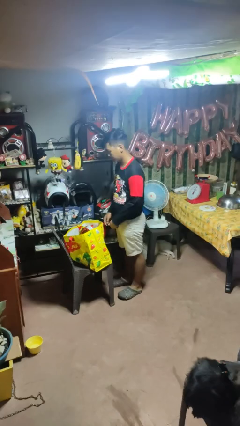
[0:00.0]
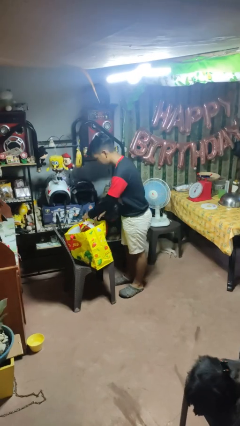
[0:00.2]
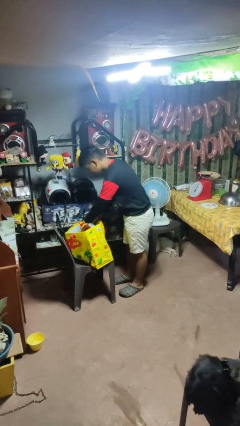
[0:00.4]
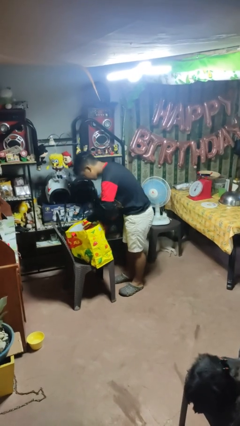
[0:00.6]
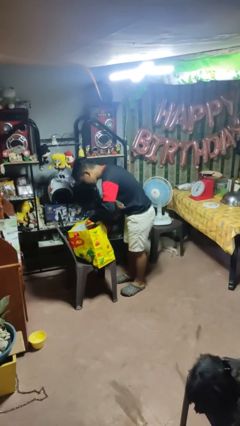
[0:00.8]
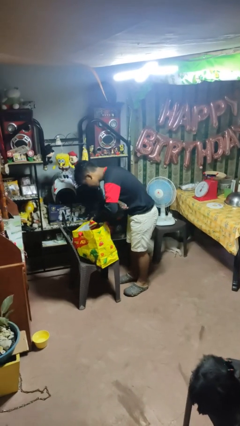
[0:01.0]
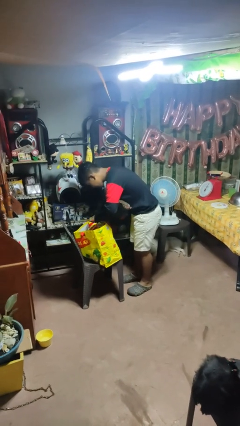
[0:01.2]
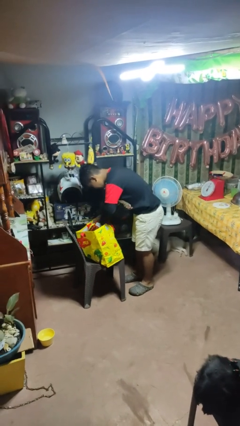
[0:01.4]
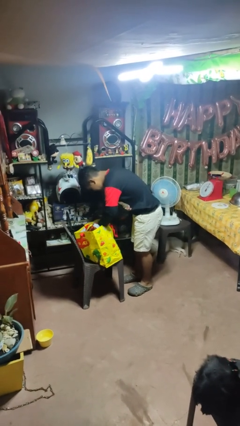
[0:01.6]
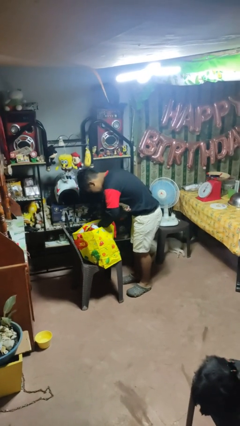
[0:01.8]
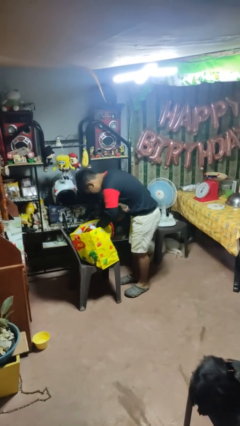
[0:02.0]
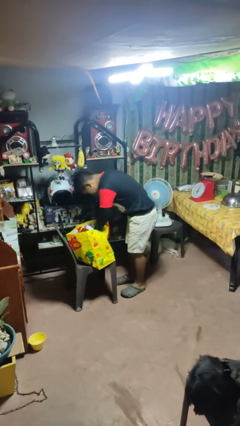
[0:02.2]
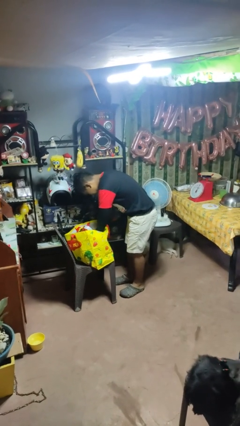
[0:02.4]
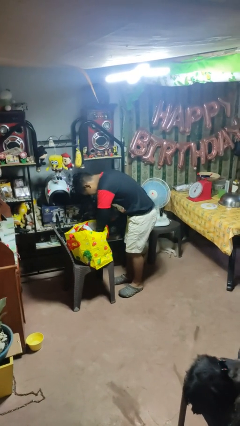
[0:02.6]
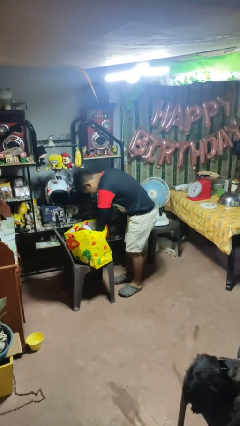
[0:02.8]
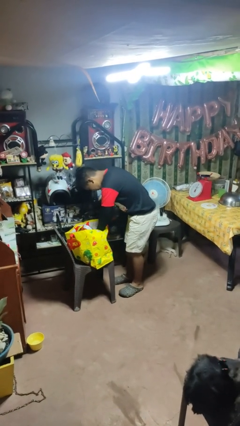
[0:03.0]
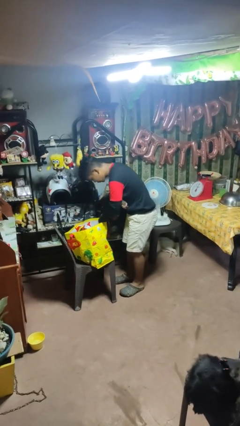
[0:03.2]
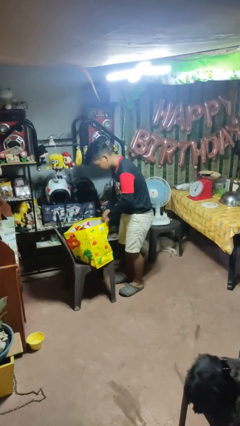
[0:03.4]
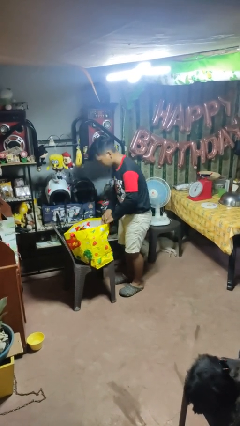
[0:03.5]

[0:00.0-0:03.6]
person searches in bag

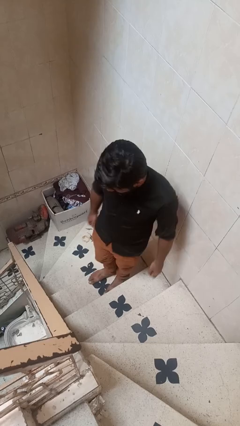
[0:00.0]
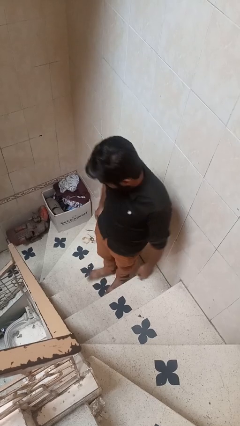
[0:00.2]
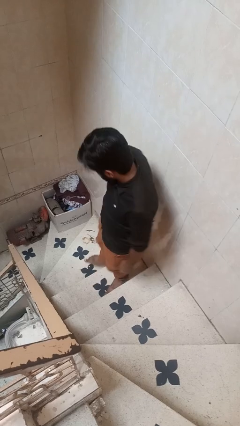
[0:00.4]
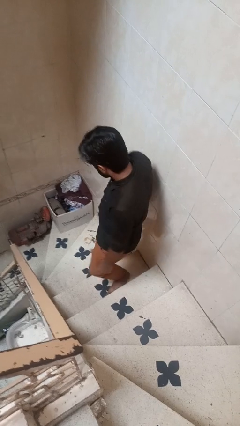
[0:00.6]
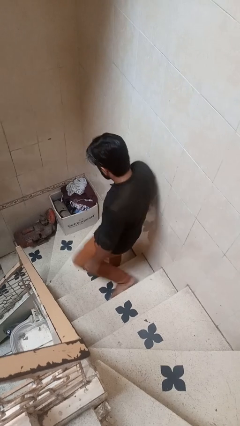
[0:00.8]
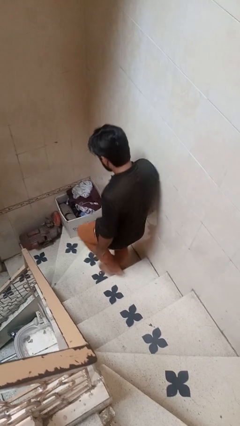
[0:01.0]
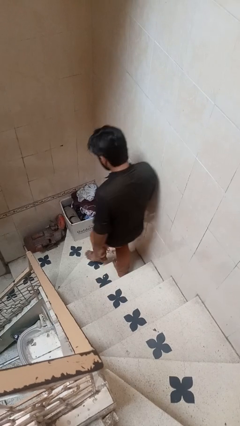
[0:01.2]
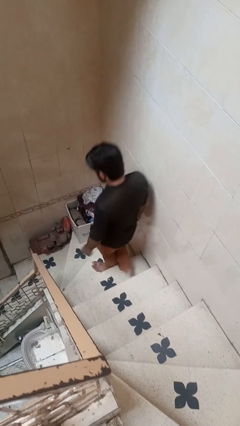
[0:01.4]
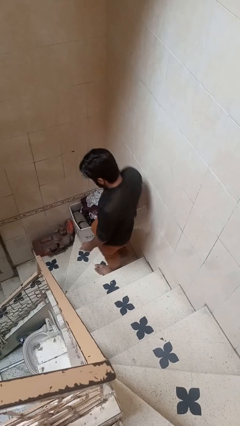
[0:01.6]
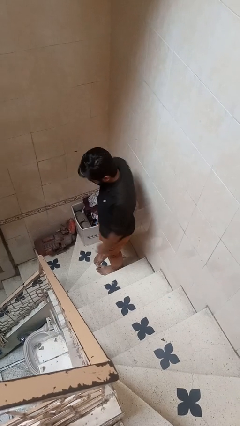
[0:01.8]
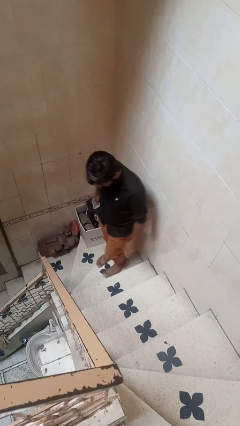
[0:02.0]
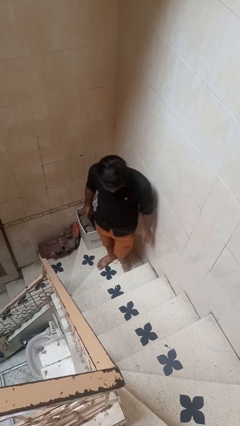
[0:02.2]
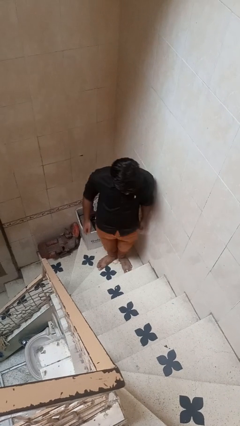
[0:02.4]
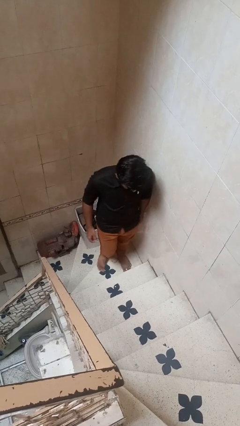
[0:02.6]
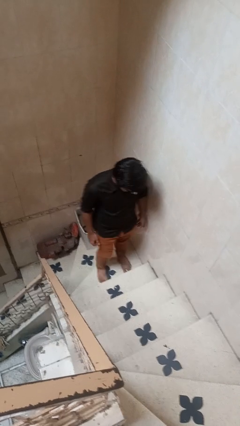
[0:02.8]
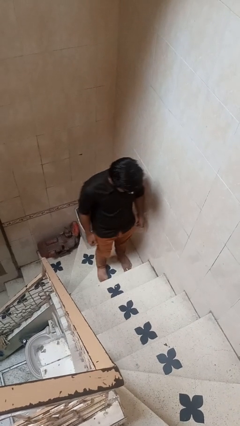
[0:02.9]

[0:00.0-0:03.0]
person climbs down stairs

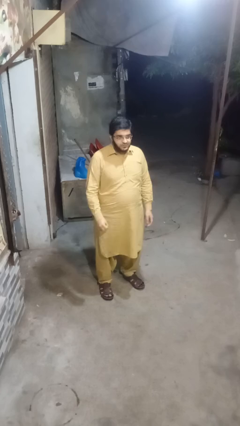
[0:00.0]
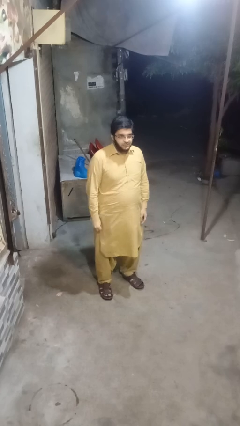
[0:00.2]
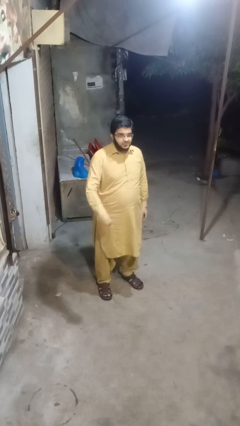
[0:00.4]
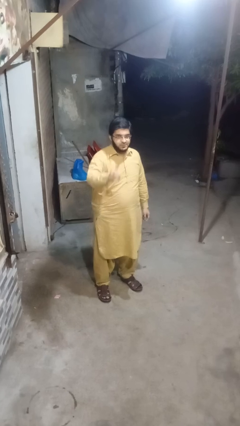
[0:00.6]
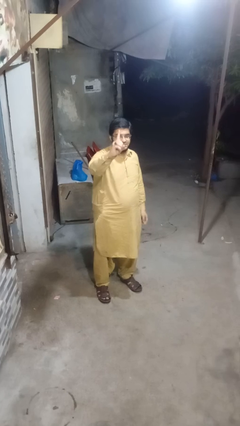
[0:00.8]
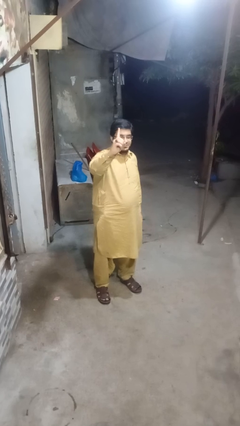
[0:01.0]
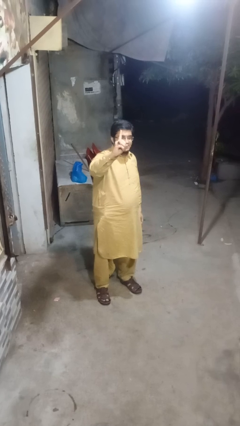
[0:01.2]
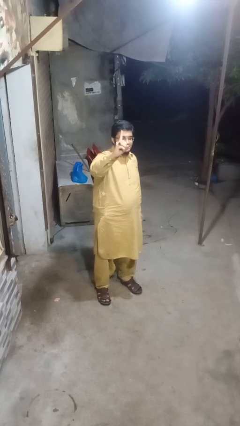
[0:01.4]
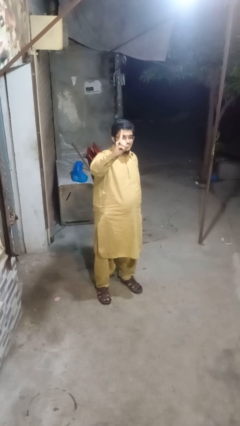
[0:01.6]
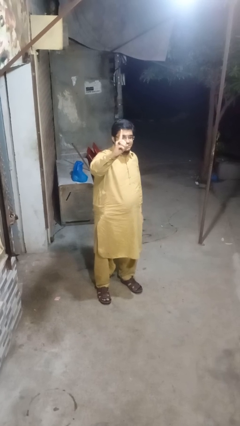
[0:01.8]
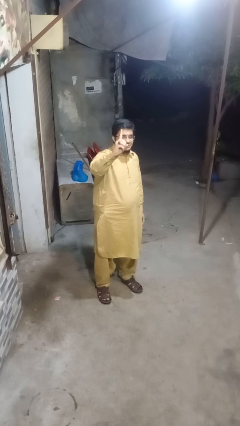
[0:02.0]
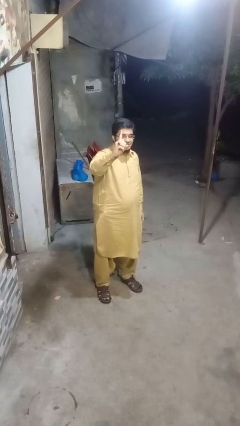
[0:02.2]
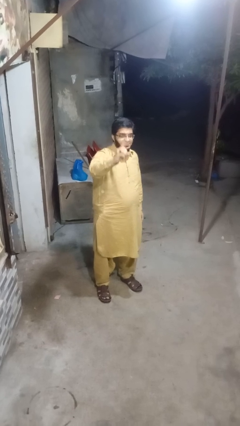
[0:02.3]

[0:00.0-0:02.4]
person gestures number one

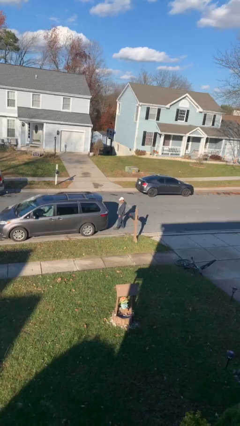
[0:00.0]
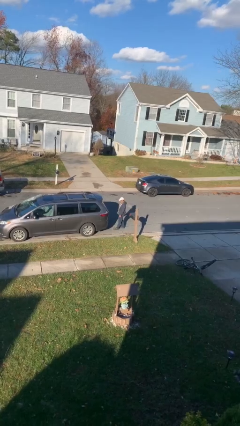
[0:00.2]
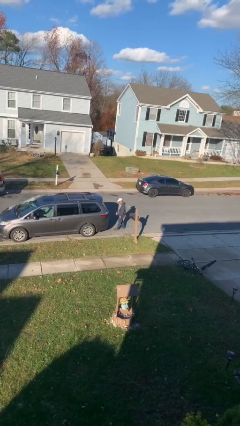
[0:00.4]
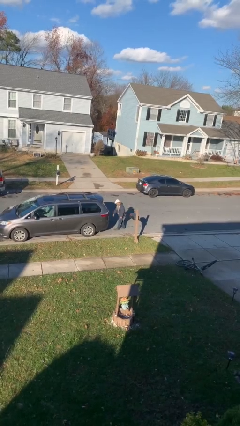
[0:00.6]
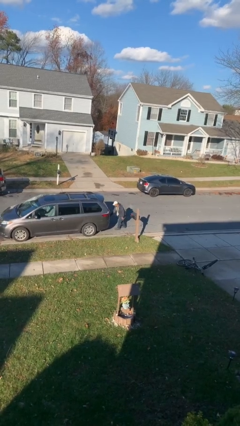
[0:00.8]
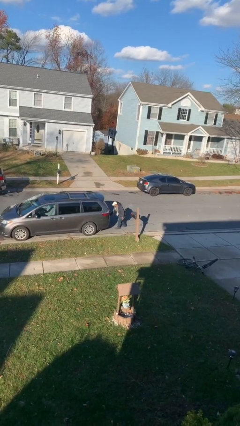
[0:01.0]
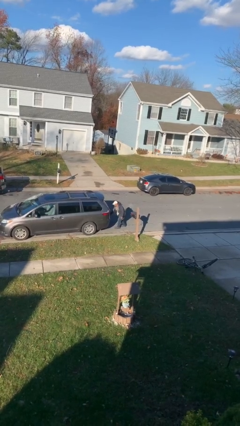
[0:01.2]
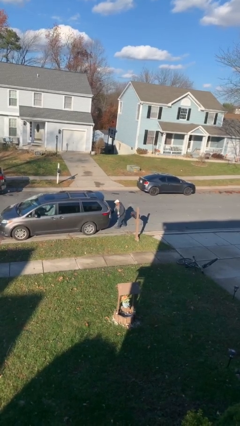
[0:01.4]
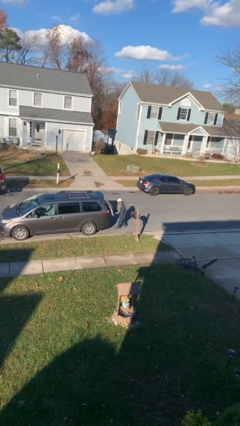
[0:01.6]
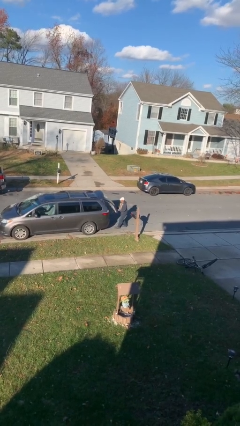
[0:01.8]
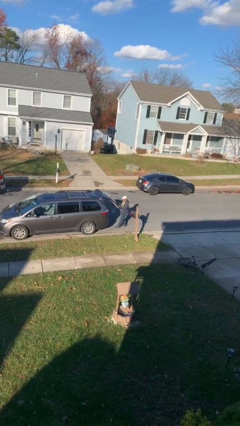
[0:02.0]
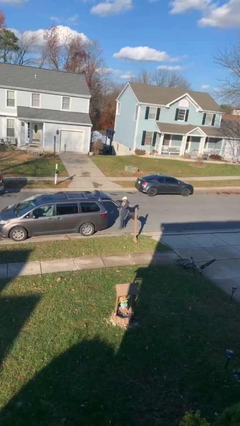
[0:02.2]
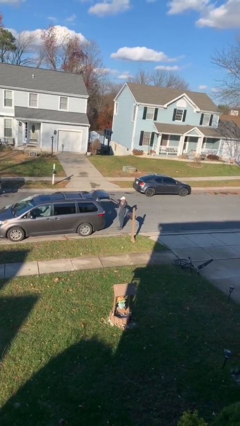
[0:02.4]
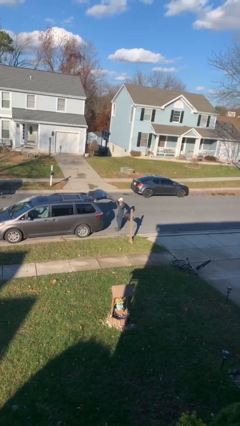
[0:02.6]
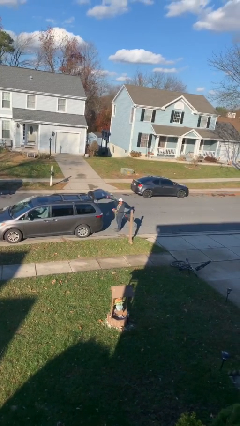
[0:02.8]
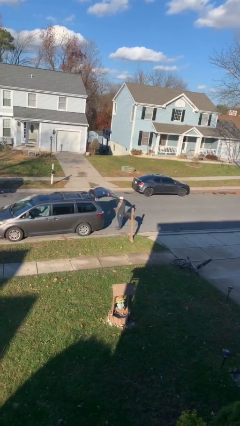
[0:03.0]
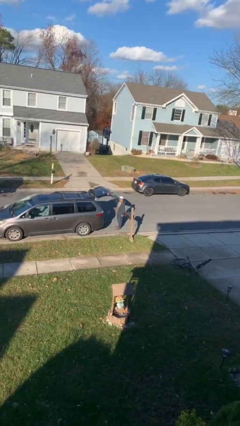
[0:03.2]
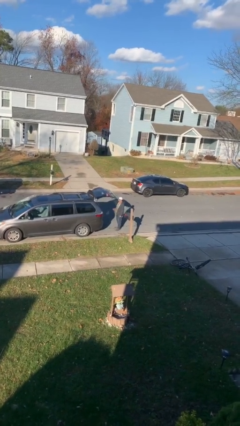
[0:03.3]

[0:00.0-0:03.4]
person opens car trunk

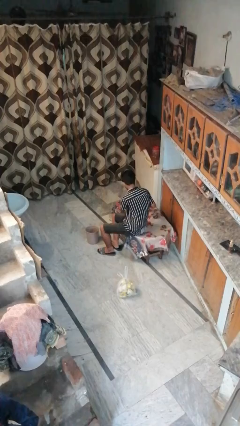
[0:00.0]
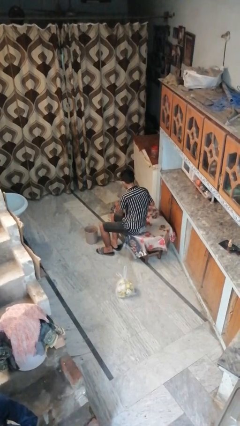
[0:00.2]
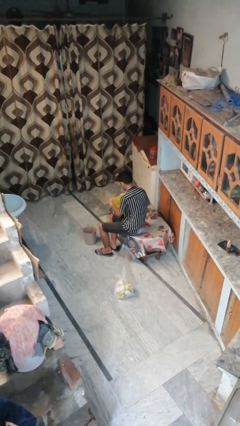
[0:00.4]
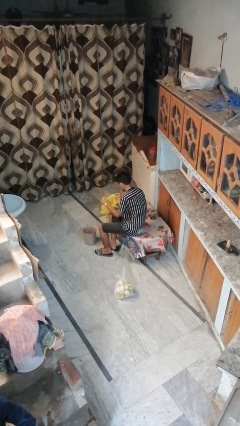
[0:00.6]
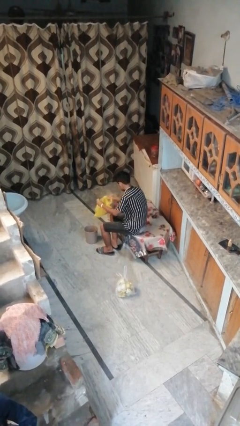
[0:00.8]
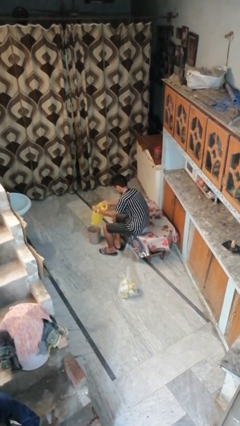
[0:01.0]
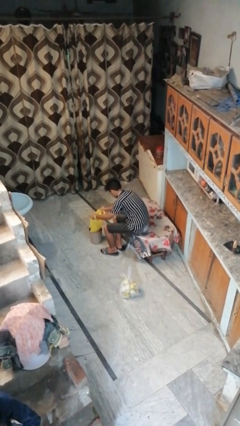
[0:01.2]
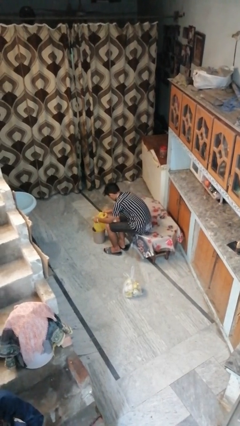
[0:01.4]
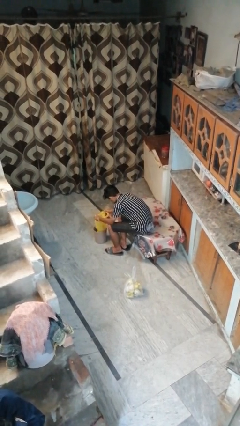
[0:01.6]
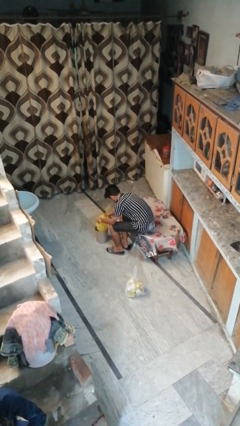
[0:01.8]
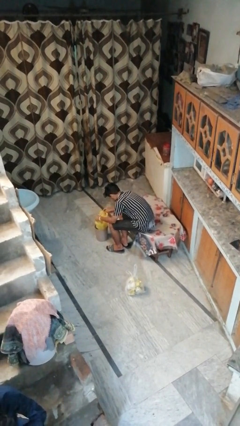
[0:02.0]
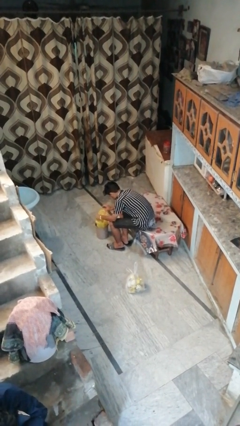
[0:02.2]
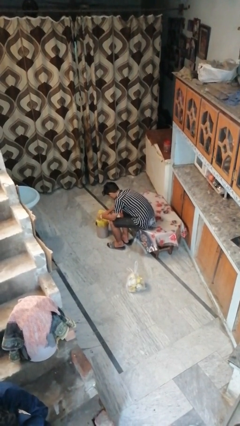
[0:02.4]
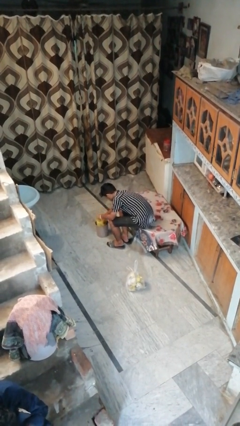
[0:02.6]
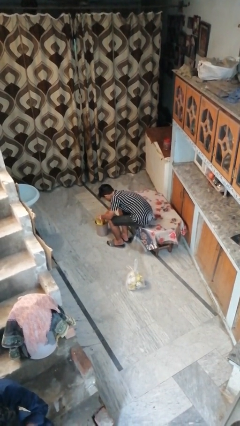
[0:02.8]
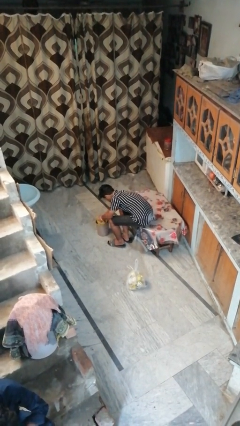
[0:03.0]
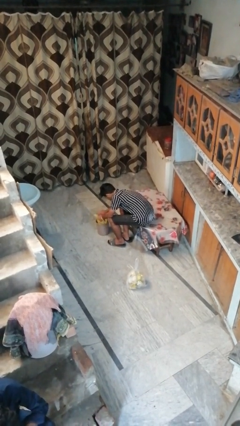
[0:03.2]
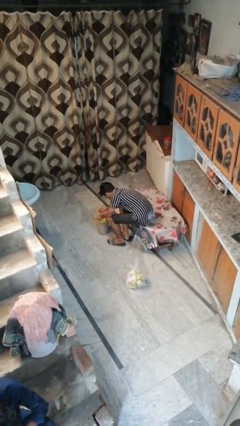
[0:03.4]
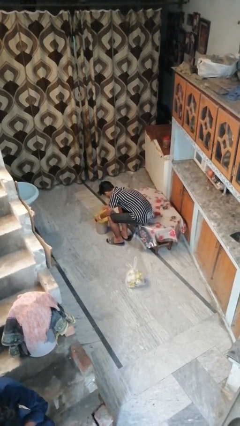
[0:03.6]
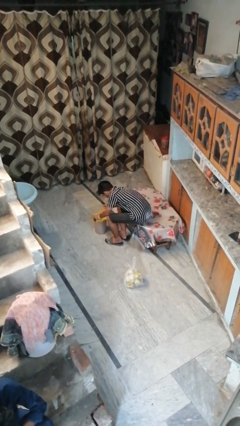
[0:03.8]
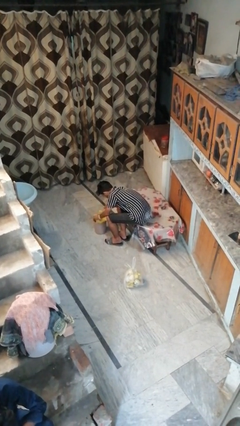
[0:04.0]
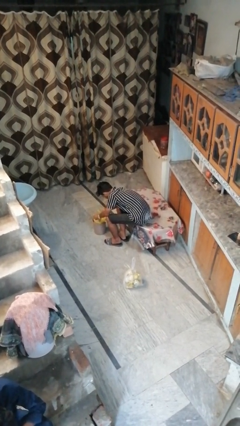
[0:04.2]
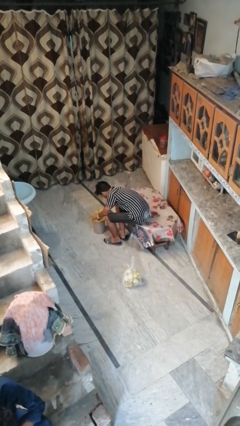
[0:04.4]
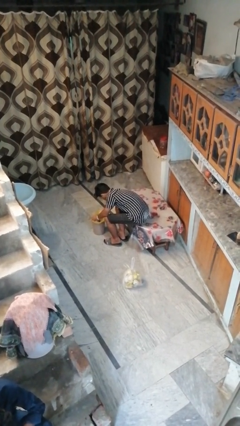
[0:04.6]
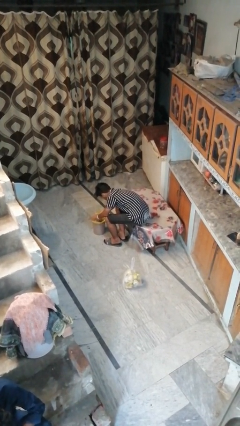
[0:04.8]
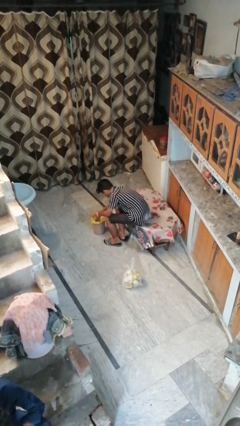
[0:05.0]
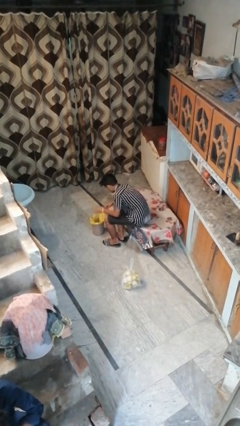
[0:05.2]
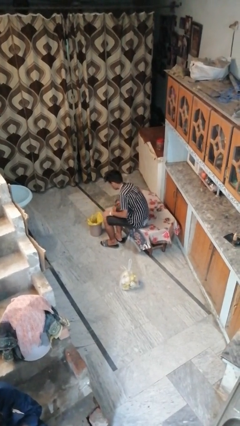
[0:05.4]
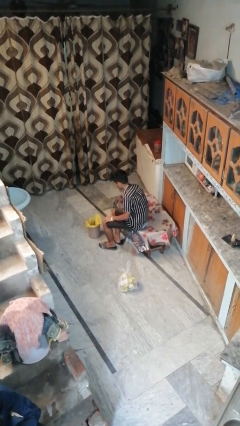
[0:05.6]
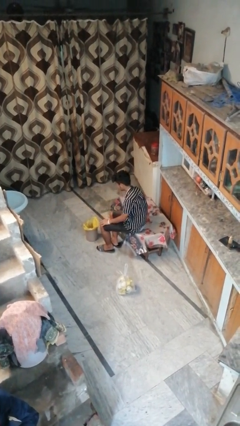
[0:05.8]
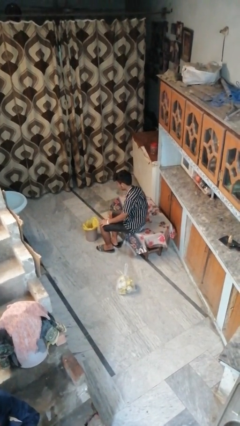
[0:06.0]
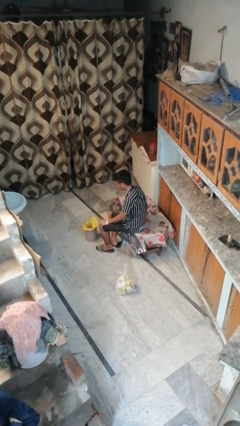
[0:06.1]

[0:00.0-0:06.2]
person inserts trashbag into trashcan
